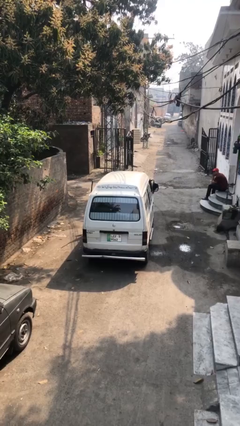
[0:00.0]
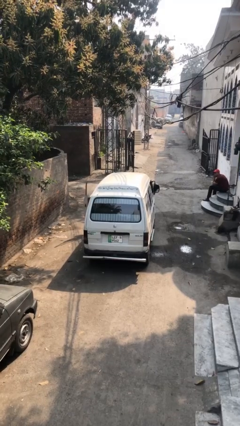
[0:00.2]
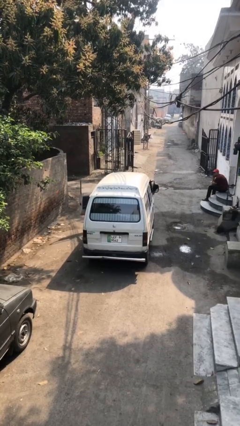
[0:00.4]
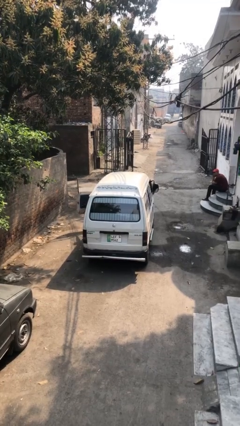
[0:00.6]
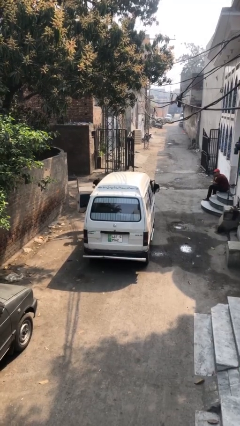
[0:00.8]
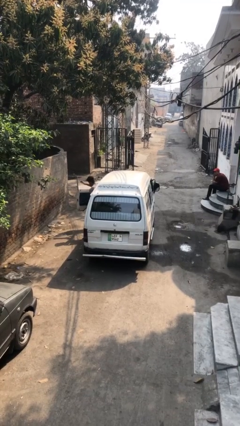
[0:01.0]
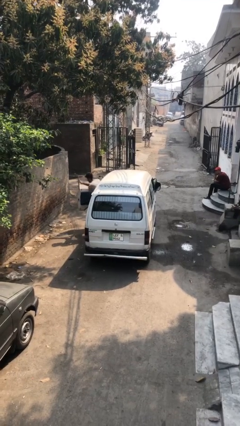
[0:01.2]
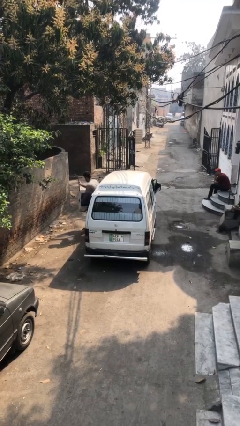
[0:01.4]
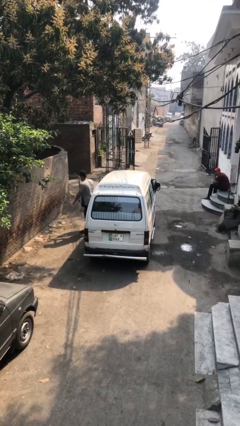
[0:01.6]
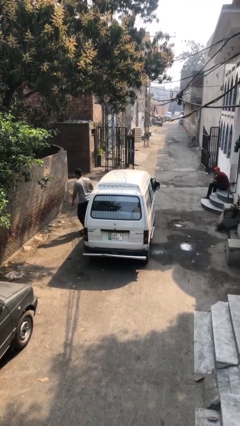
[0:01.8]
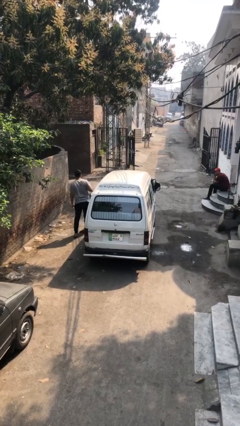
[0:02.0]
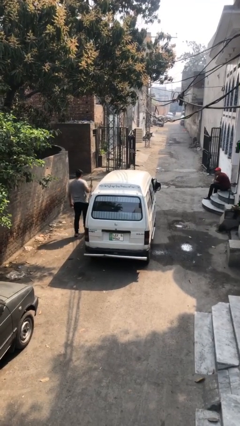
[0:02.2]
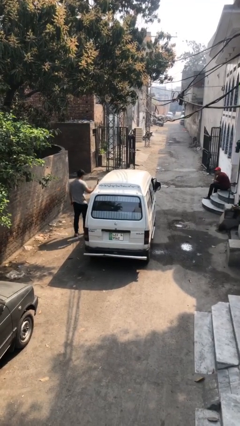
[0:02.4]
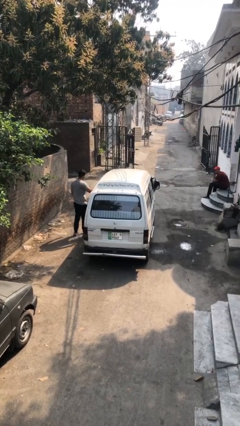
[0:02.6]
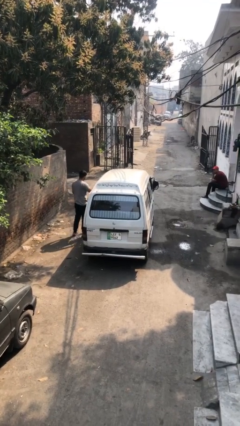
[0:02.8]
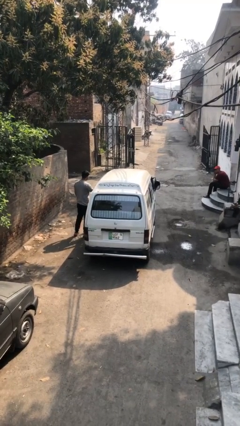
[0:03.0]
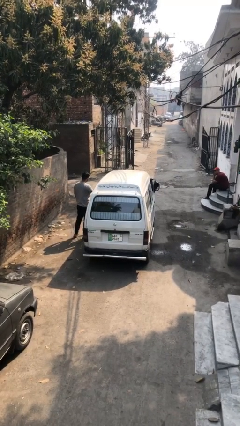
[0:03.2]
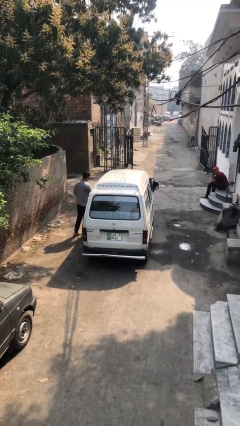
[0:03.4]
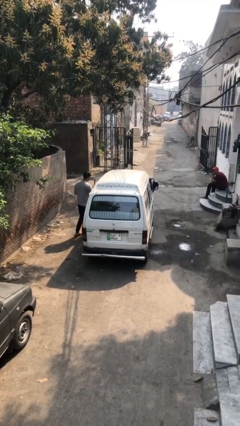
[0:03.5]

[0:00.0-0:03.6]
car drops off person

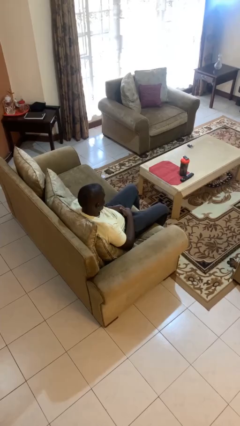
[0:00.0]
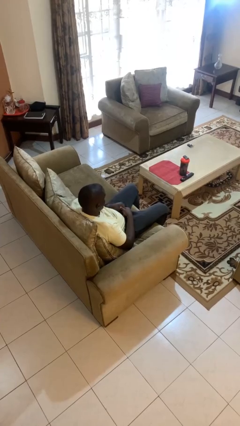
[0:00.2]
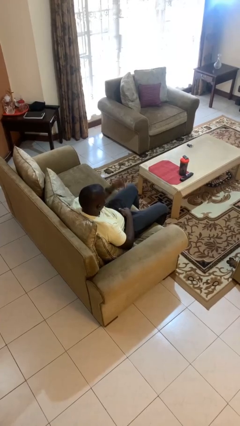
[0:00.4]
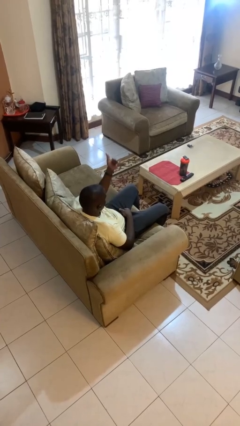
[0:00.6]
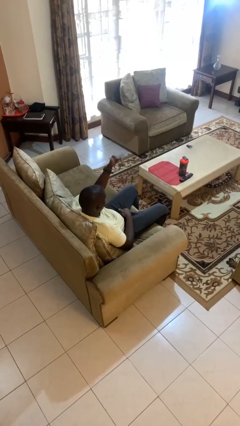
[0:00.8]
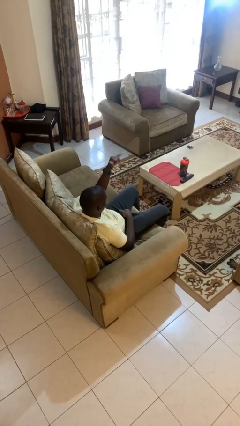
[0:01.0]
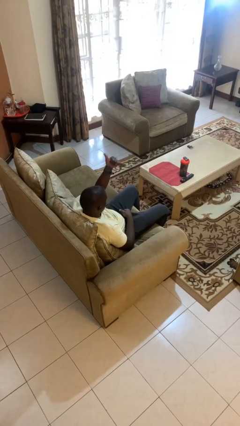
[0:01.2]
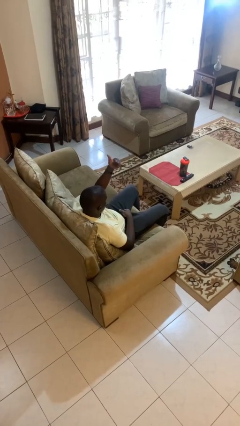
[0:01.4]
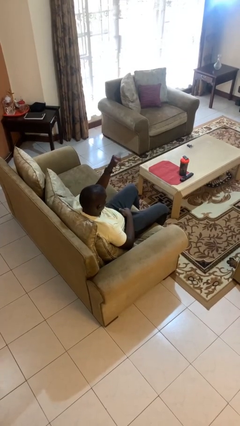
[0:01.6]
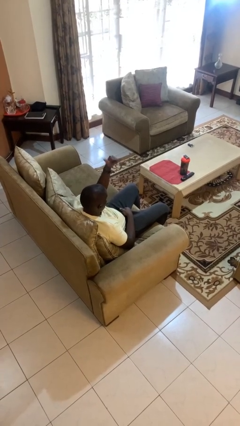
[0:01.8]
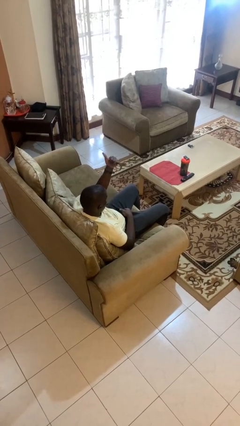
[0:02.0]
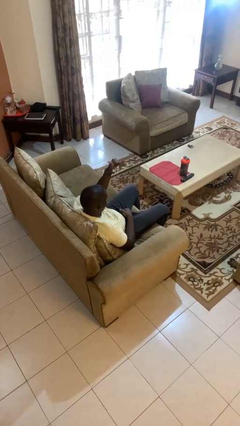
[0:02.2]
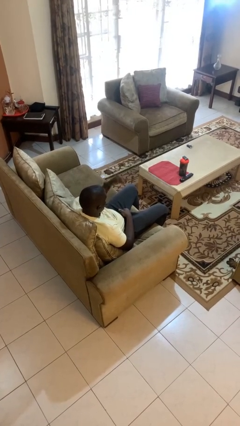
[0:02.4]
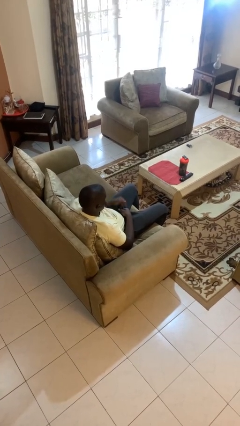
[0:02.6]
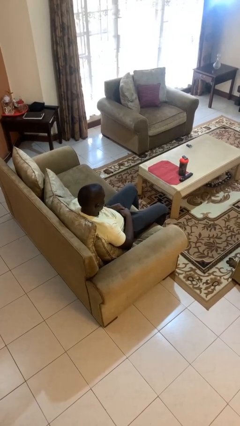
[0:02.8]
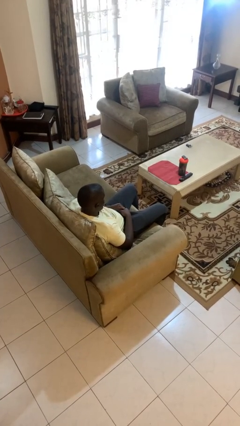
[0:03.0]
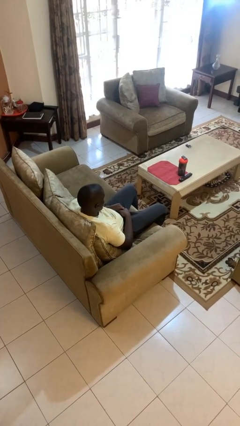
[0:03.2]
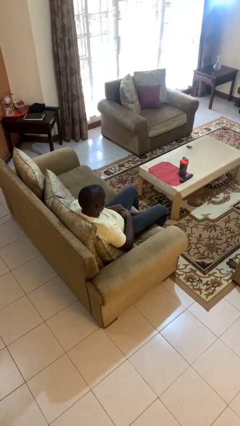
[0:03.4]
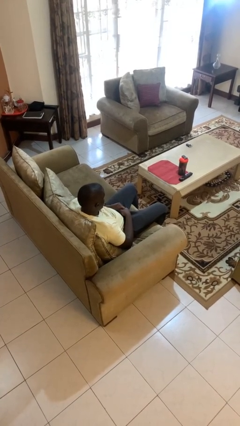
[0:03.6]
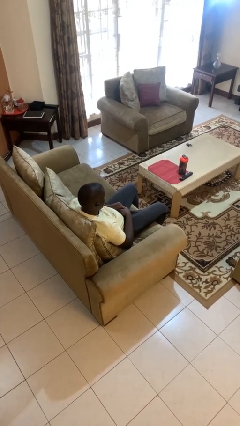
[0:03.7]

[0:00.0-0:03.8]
person gestures hang loose

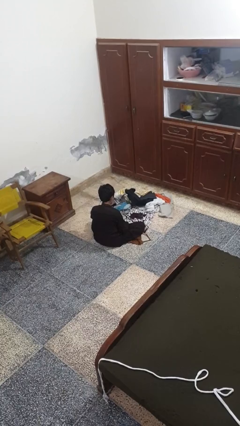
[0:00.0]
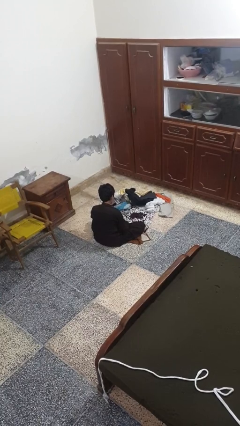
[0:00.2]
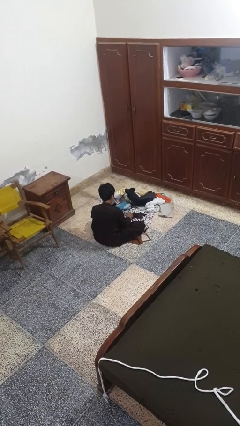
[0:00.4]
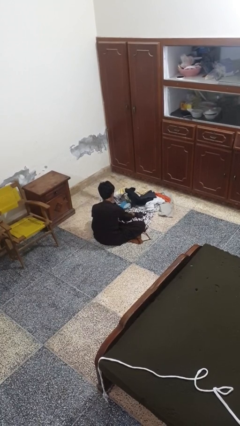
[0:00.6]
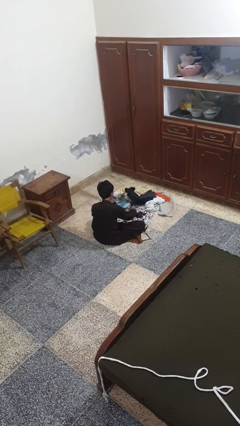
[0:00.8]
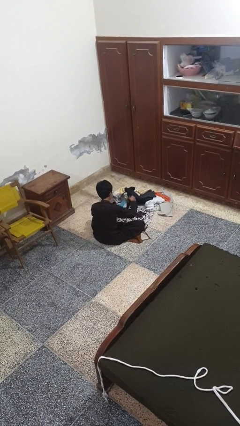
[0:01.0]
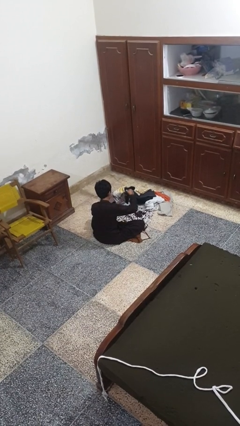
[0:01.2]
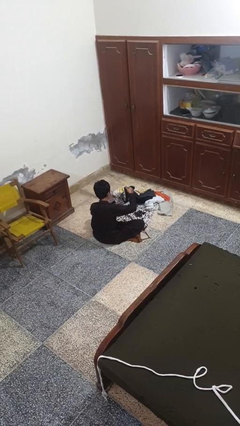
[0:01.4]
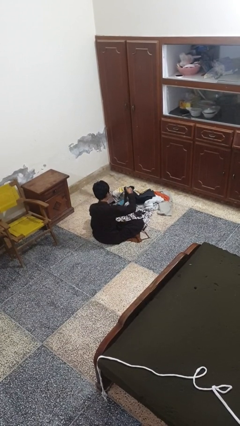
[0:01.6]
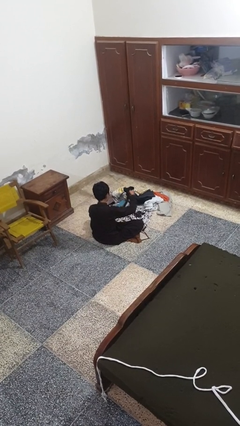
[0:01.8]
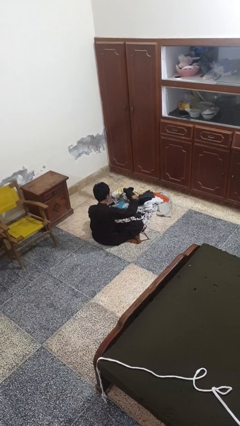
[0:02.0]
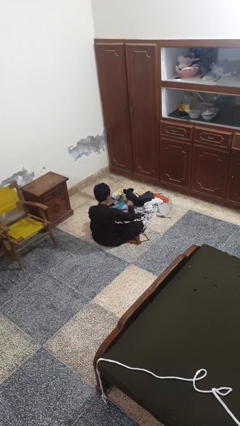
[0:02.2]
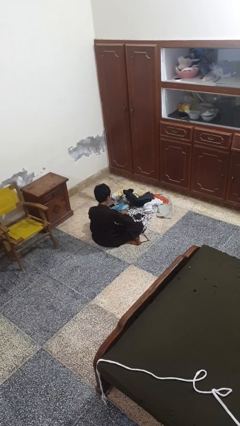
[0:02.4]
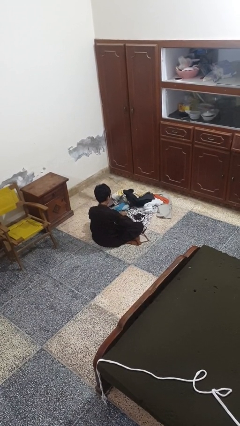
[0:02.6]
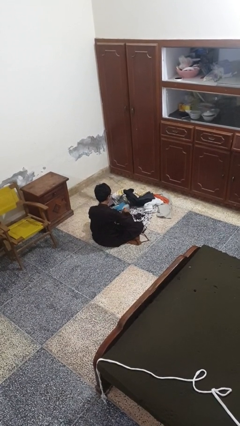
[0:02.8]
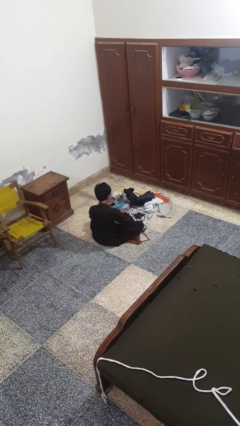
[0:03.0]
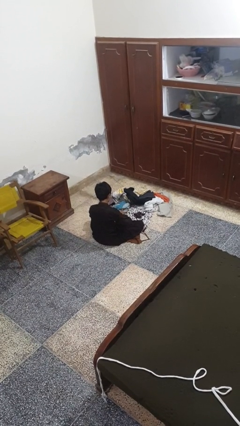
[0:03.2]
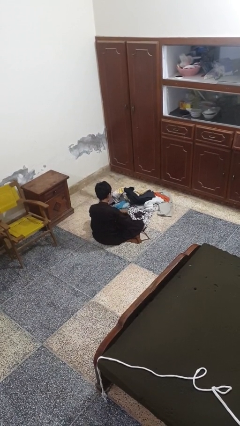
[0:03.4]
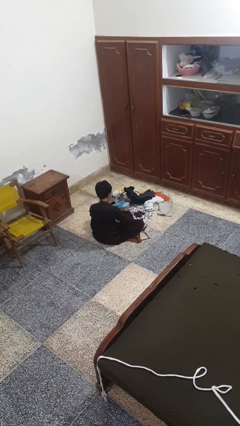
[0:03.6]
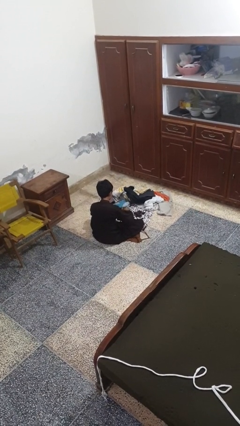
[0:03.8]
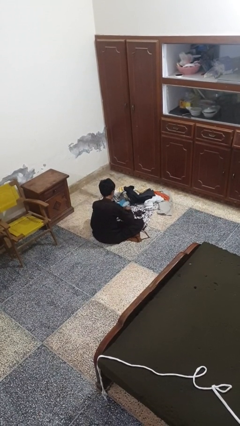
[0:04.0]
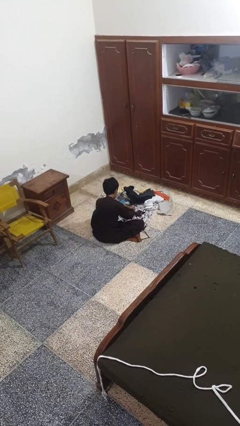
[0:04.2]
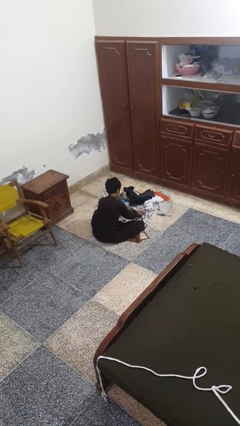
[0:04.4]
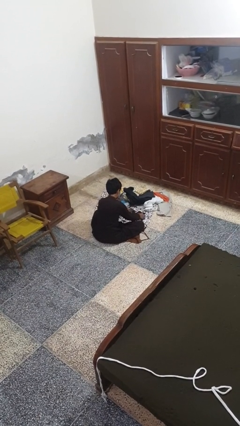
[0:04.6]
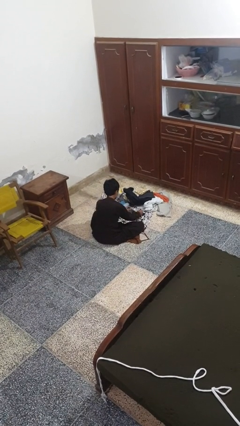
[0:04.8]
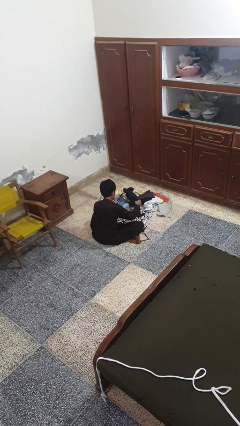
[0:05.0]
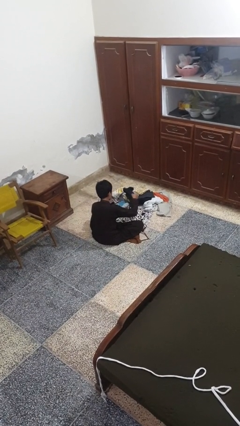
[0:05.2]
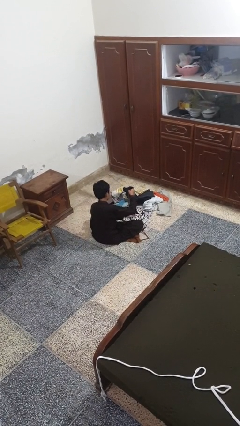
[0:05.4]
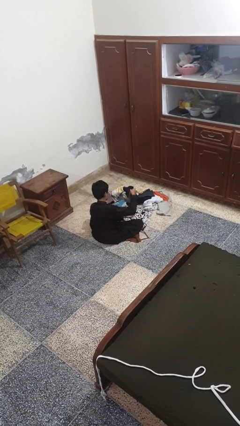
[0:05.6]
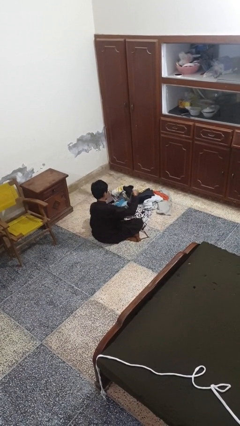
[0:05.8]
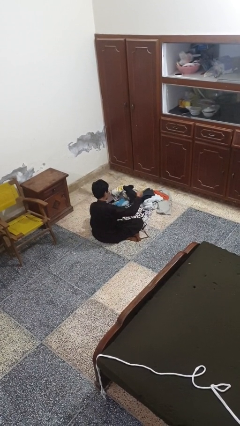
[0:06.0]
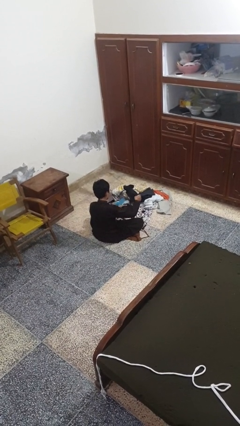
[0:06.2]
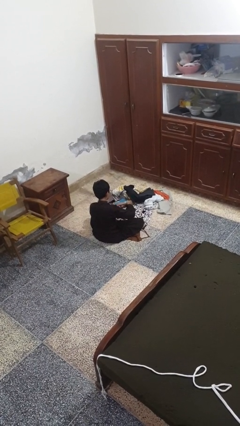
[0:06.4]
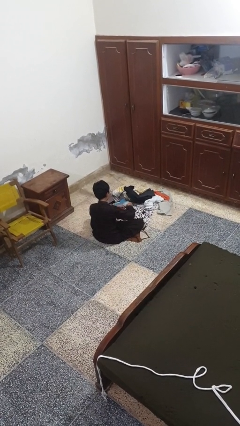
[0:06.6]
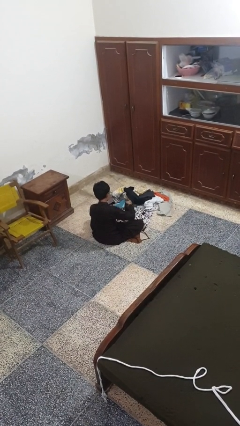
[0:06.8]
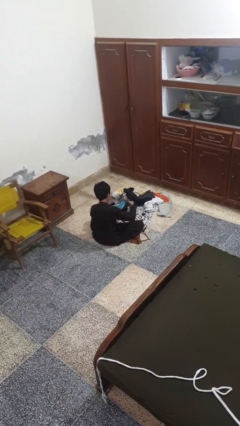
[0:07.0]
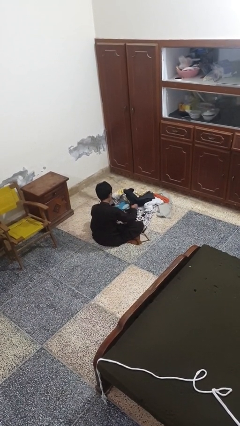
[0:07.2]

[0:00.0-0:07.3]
person folds socks

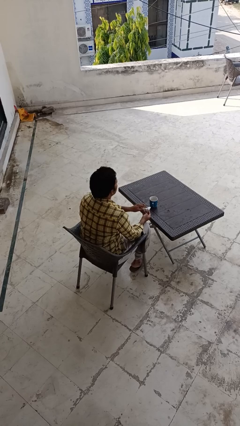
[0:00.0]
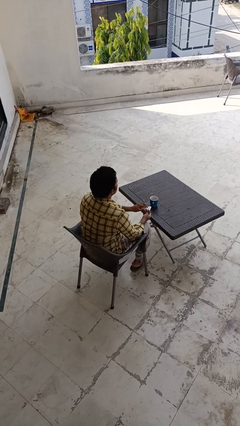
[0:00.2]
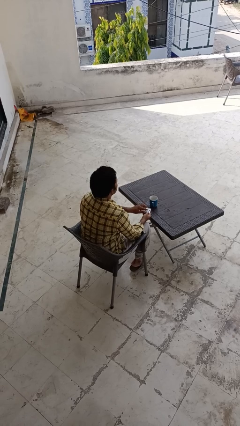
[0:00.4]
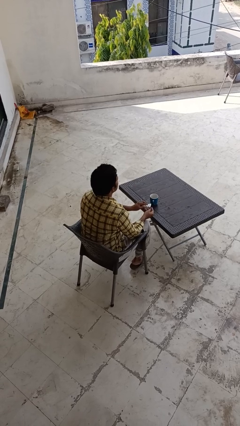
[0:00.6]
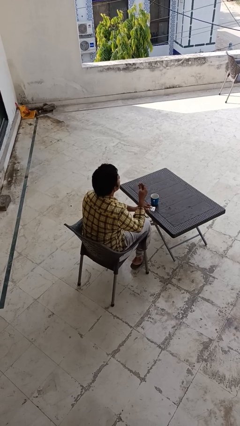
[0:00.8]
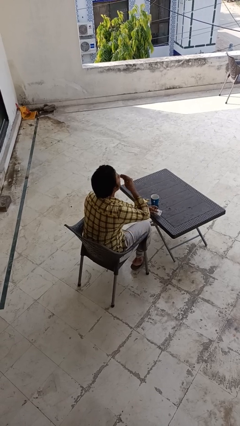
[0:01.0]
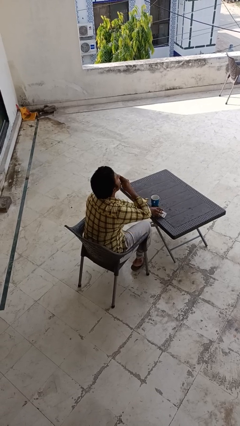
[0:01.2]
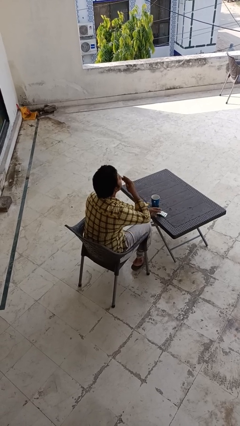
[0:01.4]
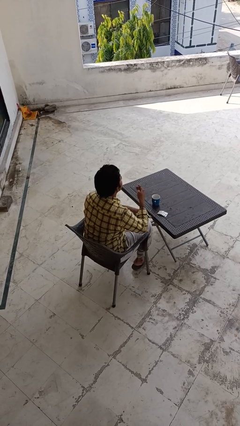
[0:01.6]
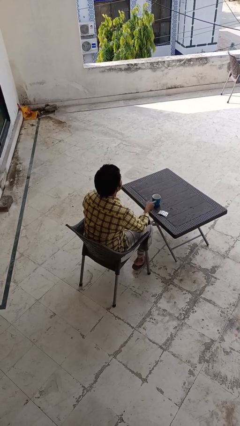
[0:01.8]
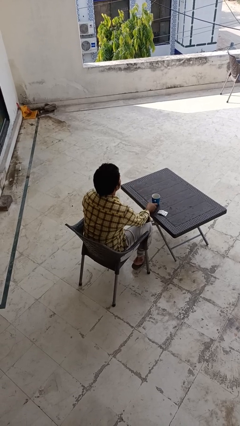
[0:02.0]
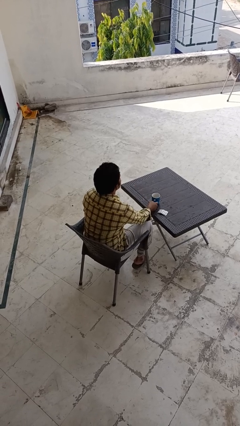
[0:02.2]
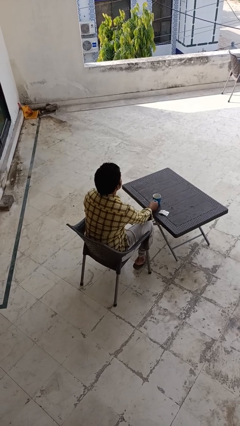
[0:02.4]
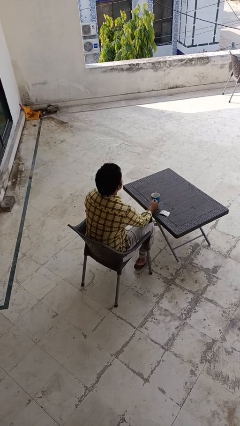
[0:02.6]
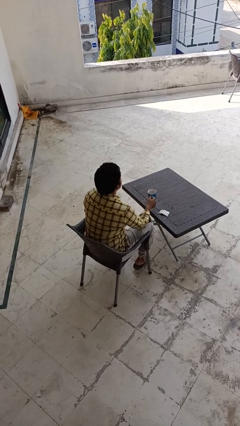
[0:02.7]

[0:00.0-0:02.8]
person takes medicine pills

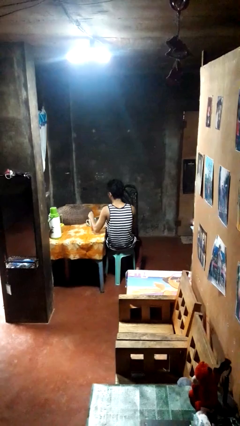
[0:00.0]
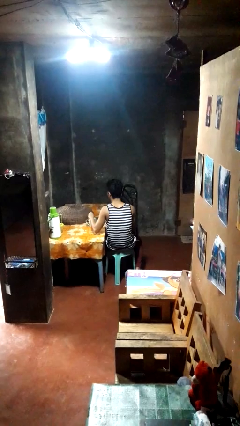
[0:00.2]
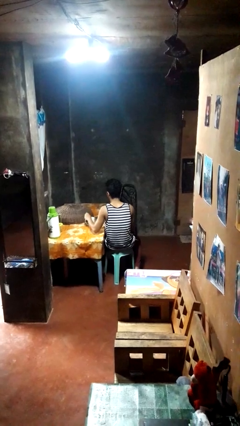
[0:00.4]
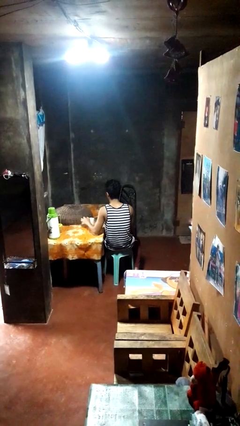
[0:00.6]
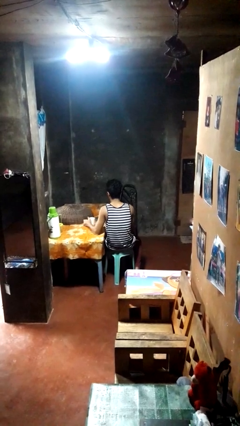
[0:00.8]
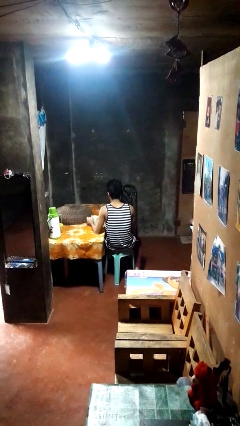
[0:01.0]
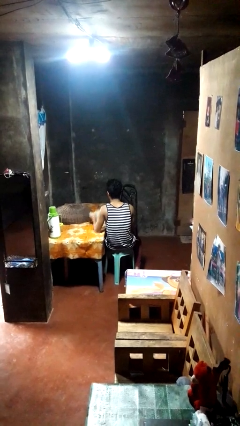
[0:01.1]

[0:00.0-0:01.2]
person stirs mug
